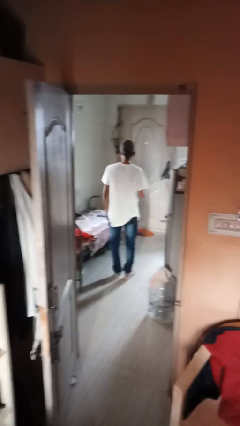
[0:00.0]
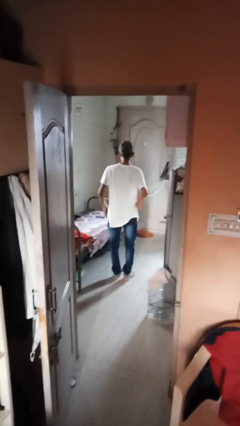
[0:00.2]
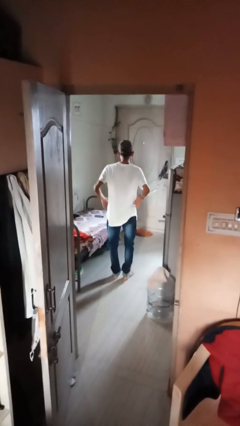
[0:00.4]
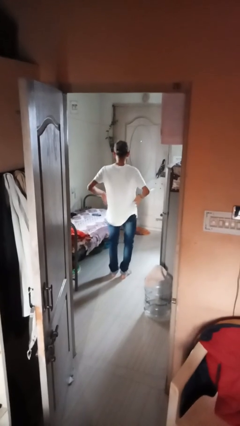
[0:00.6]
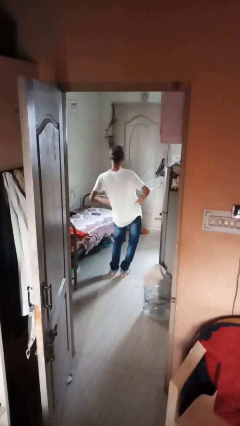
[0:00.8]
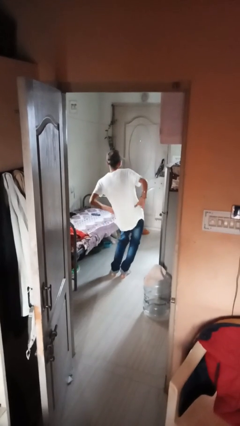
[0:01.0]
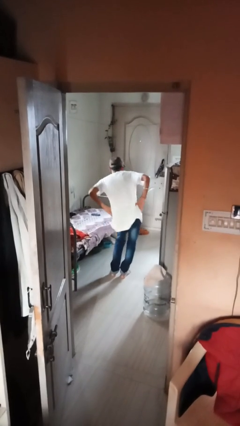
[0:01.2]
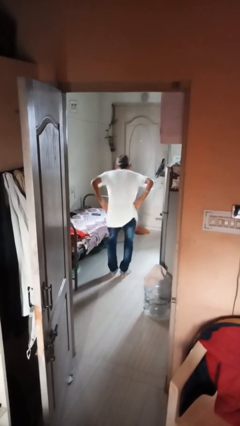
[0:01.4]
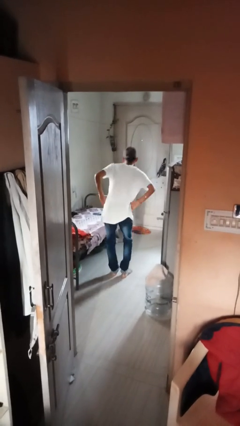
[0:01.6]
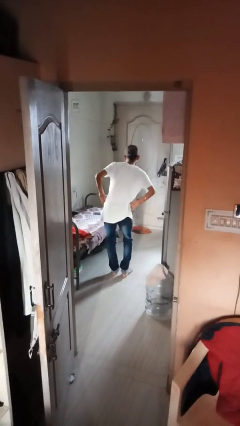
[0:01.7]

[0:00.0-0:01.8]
person wiggles hips

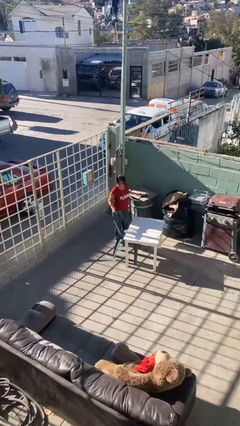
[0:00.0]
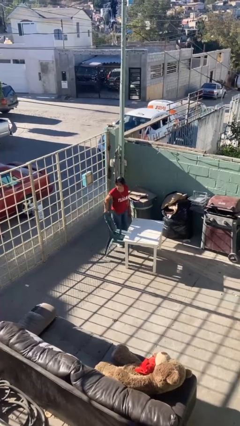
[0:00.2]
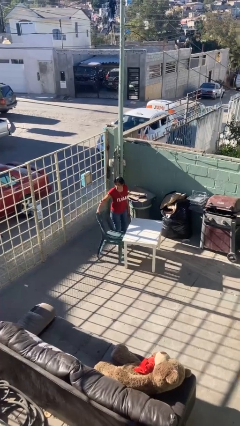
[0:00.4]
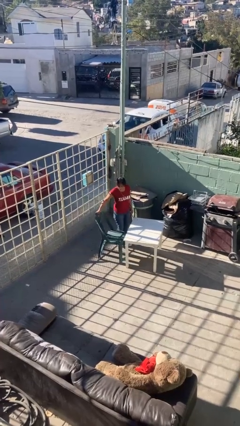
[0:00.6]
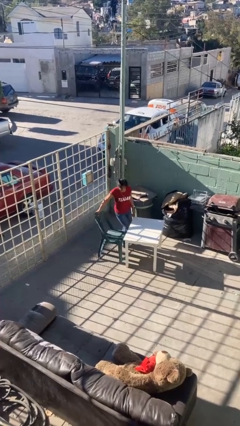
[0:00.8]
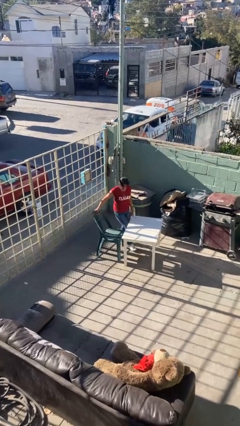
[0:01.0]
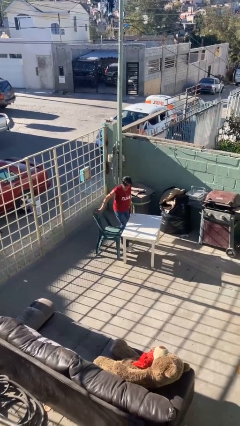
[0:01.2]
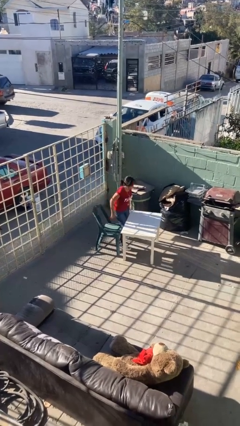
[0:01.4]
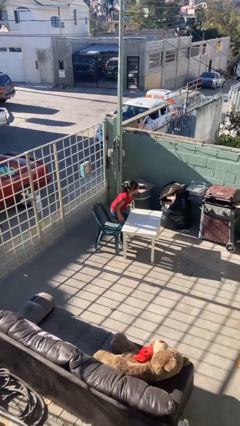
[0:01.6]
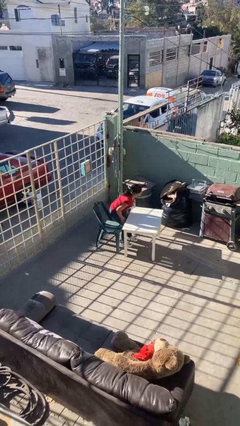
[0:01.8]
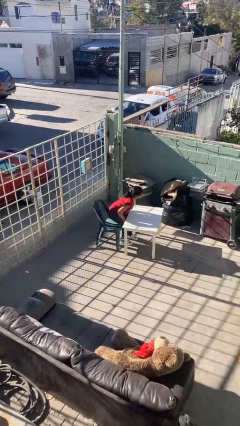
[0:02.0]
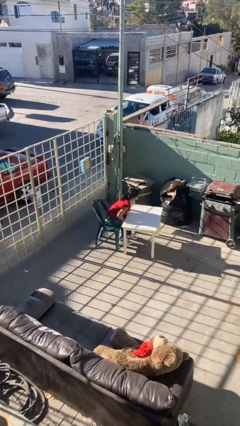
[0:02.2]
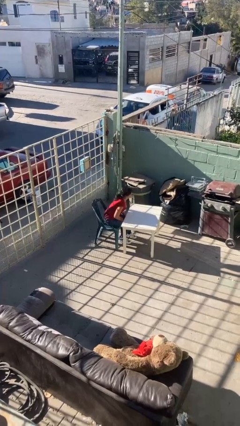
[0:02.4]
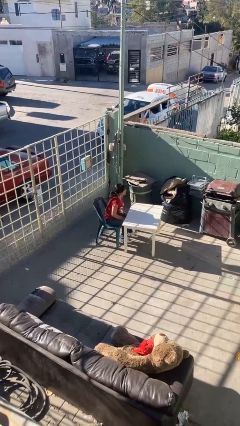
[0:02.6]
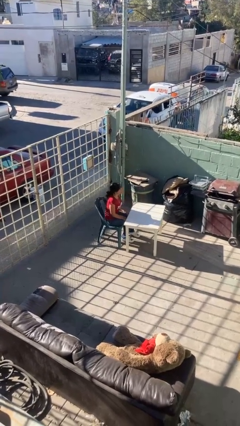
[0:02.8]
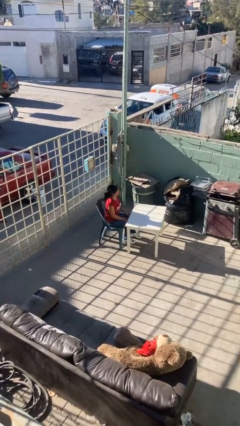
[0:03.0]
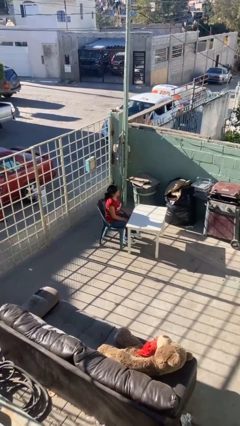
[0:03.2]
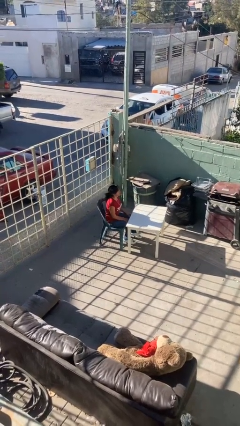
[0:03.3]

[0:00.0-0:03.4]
person sits down

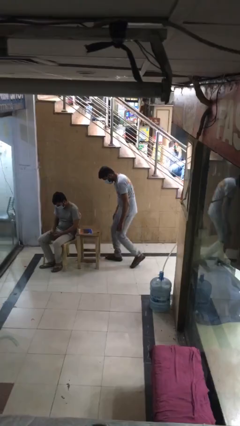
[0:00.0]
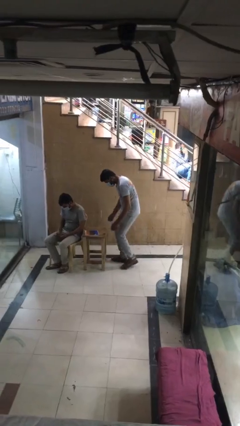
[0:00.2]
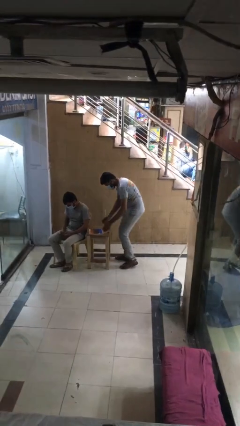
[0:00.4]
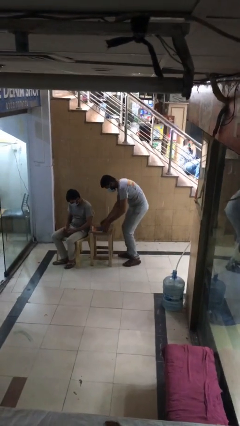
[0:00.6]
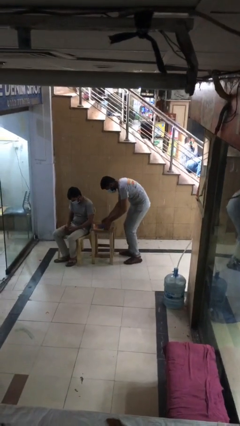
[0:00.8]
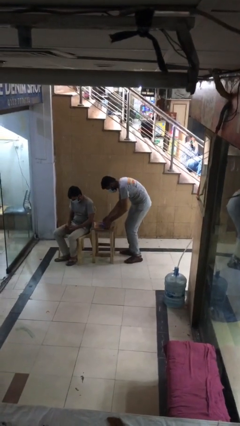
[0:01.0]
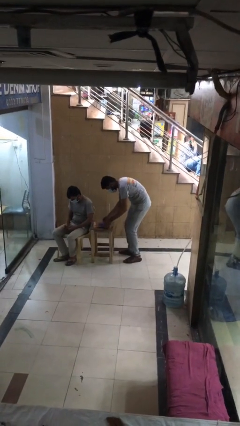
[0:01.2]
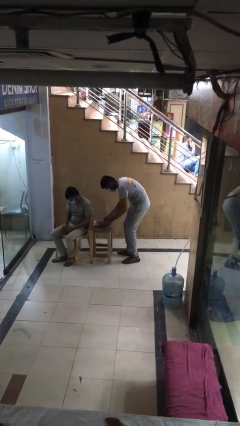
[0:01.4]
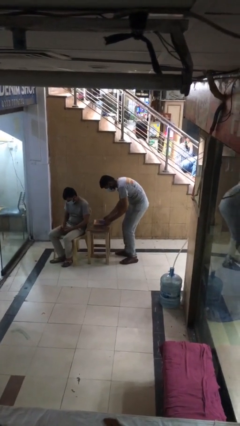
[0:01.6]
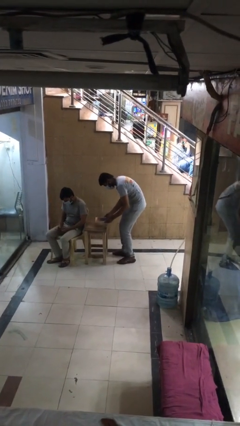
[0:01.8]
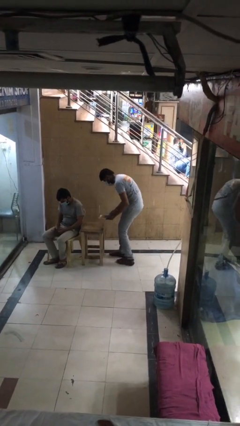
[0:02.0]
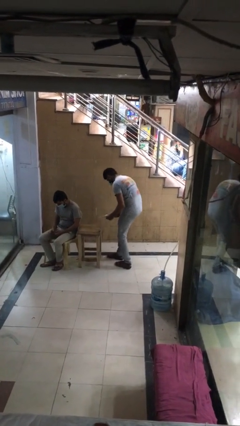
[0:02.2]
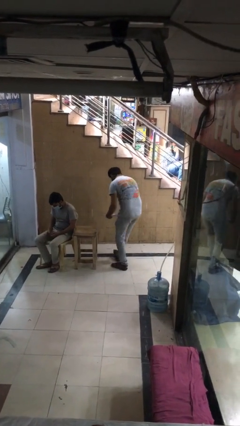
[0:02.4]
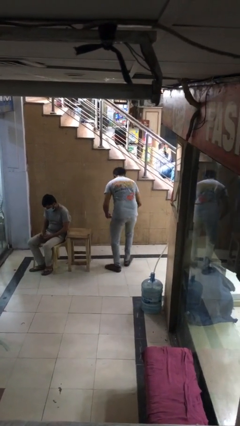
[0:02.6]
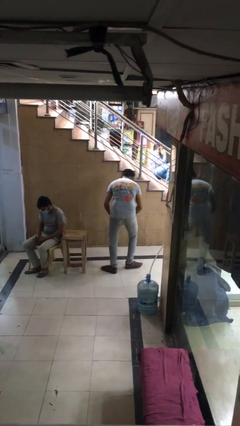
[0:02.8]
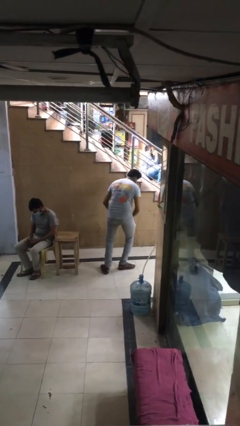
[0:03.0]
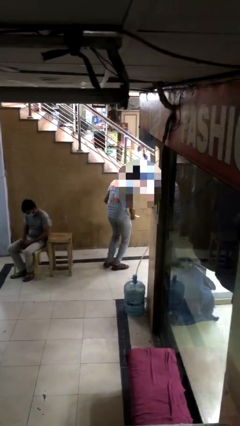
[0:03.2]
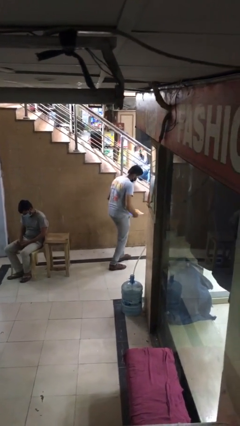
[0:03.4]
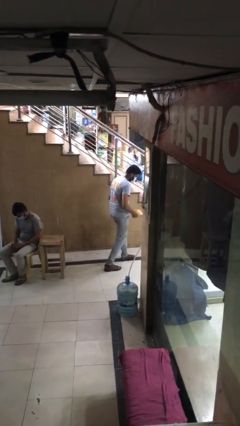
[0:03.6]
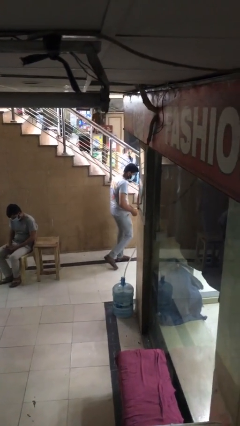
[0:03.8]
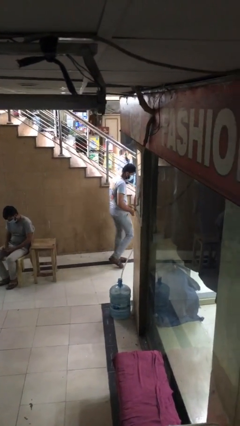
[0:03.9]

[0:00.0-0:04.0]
person steals object from person

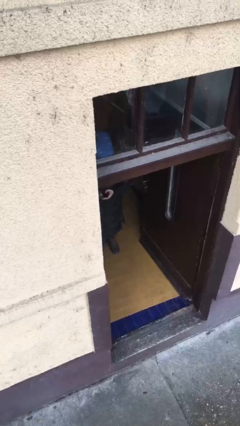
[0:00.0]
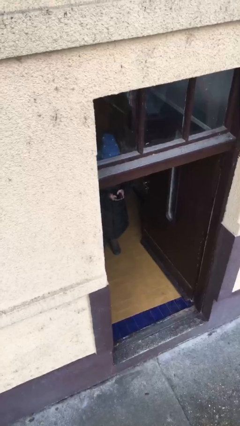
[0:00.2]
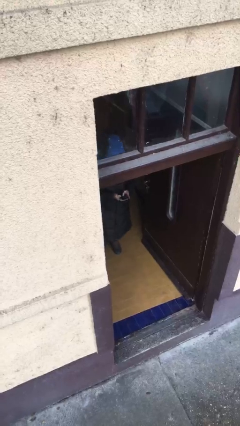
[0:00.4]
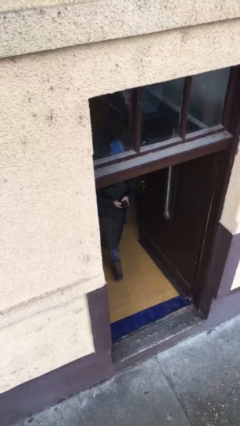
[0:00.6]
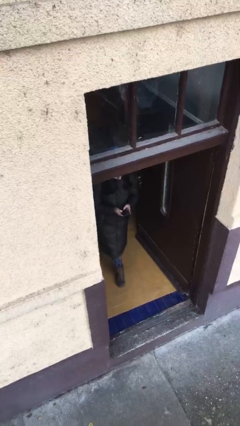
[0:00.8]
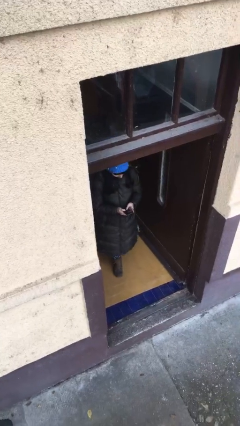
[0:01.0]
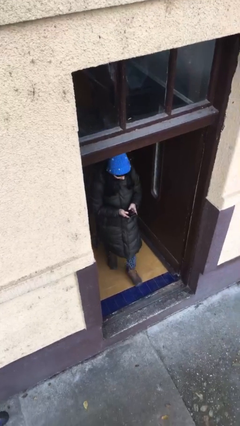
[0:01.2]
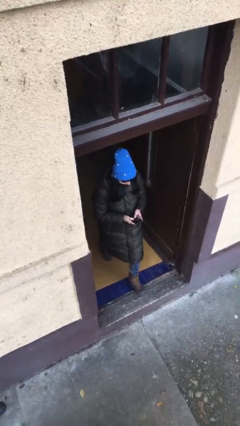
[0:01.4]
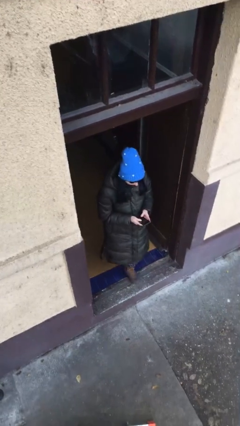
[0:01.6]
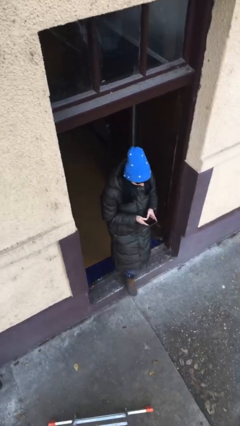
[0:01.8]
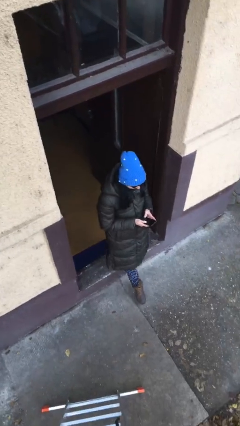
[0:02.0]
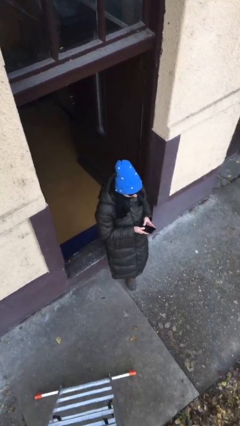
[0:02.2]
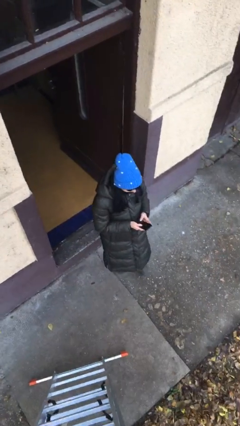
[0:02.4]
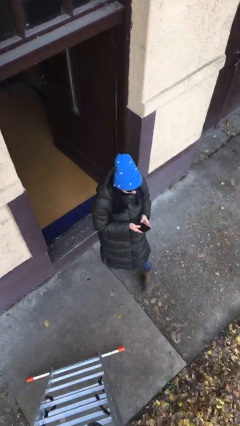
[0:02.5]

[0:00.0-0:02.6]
person enters scene through structure

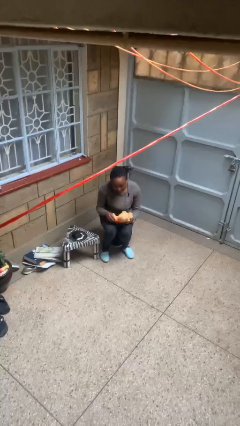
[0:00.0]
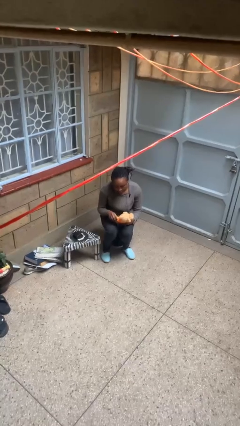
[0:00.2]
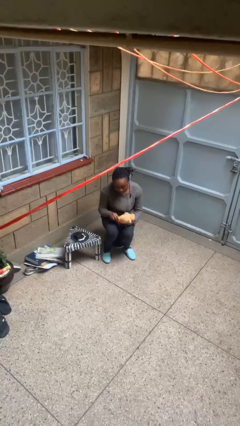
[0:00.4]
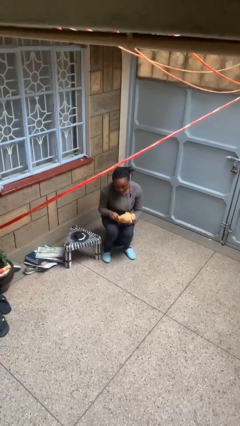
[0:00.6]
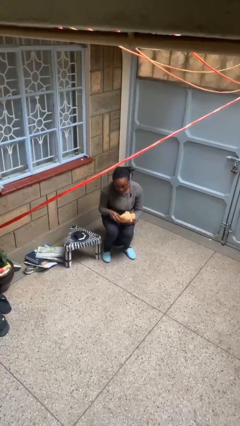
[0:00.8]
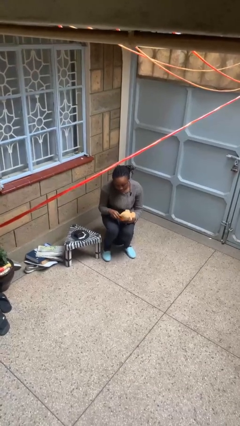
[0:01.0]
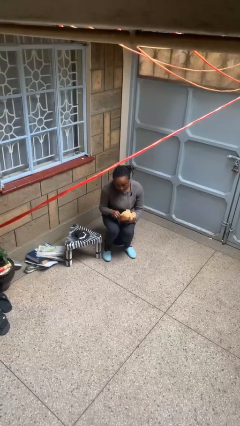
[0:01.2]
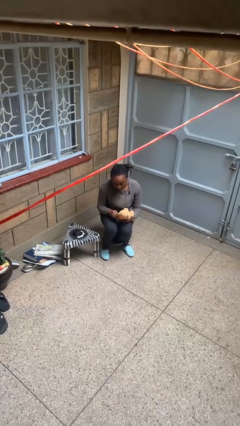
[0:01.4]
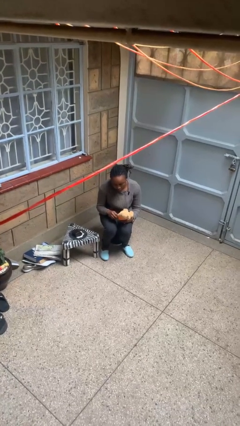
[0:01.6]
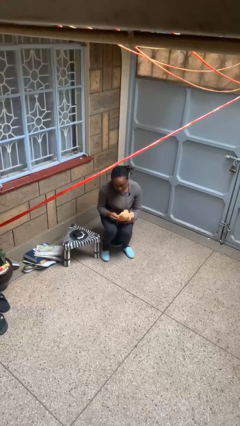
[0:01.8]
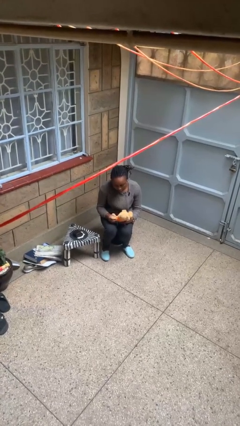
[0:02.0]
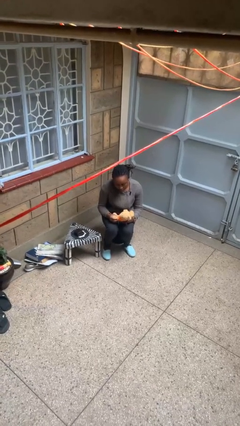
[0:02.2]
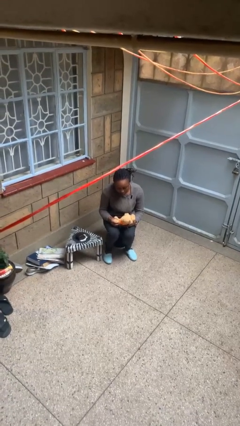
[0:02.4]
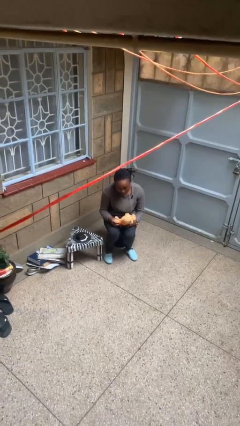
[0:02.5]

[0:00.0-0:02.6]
person squeezes object

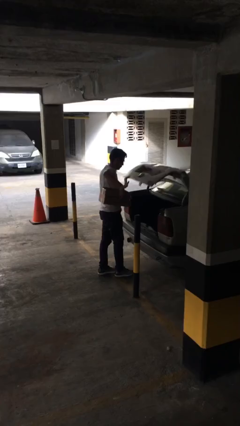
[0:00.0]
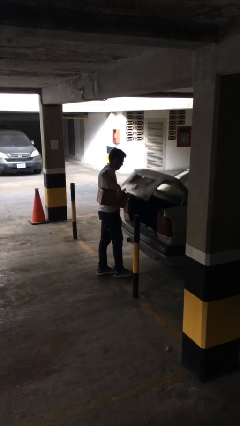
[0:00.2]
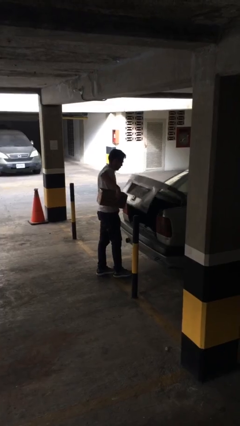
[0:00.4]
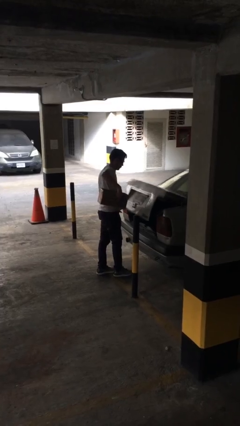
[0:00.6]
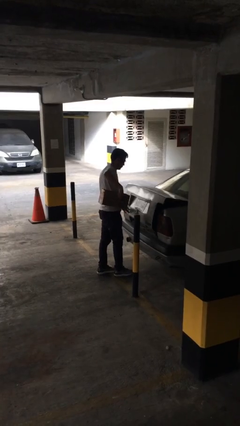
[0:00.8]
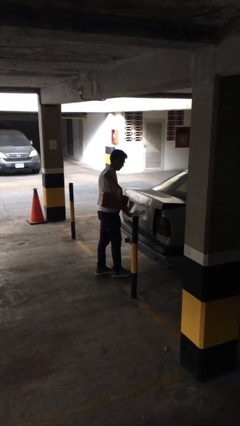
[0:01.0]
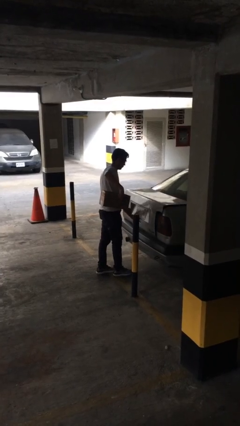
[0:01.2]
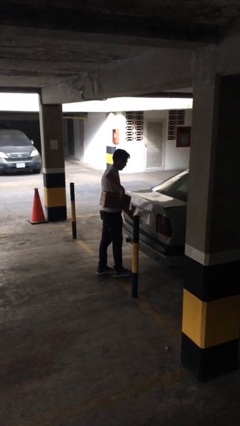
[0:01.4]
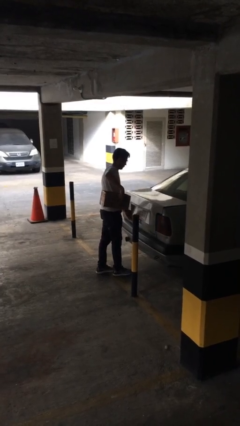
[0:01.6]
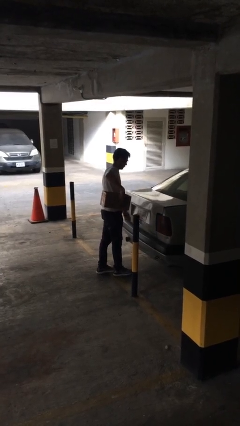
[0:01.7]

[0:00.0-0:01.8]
person closes car trunk

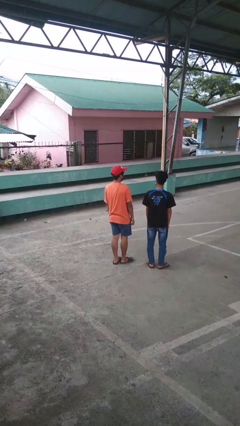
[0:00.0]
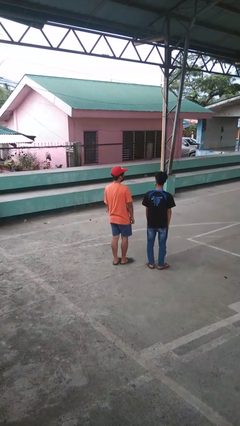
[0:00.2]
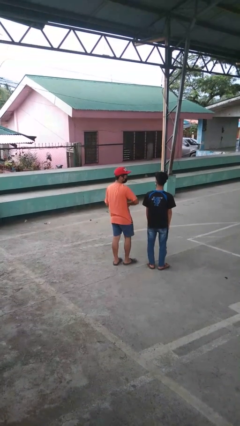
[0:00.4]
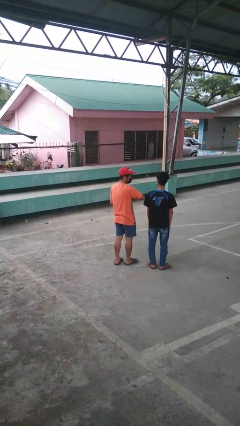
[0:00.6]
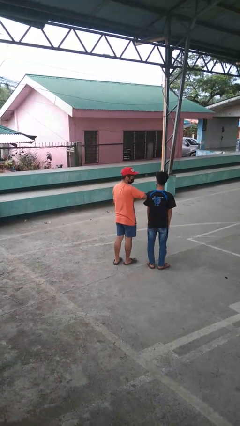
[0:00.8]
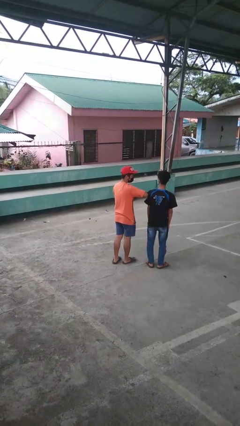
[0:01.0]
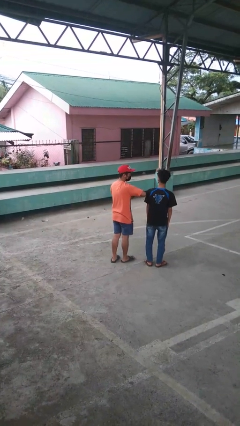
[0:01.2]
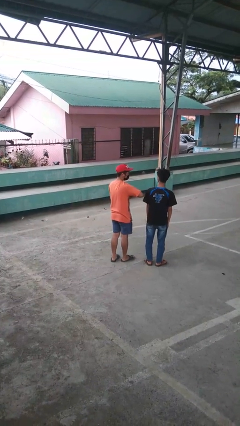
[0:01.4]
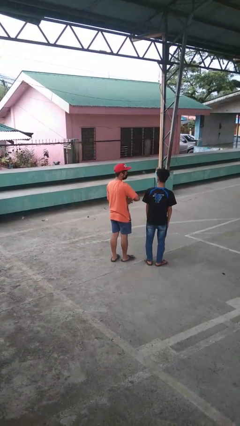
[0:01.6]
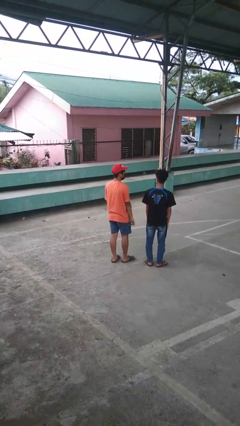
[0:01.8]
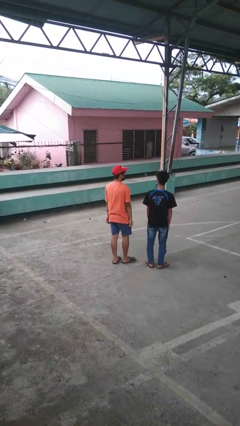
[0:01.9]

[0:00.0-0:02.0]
person nudges person with elbow
